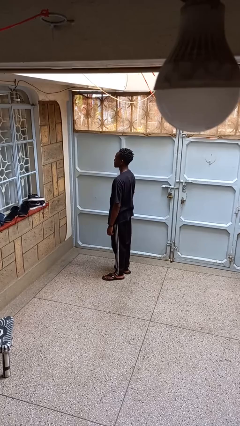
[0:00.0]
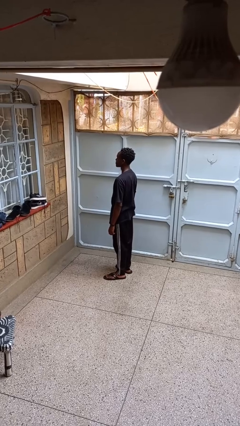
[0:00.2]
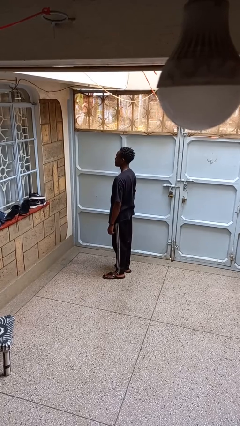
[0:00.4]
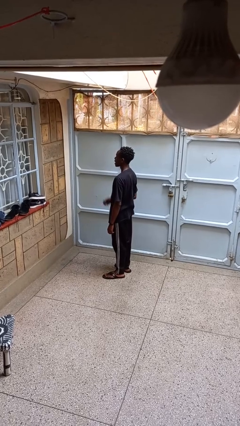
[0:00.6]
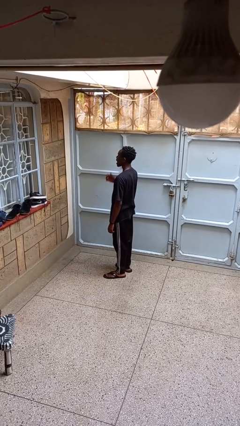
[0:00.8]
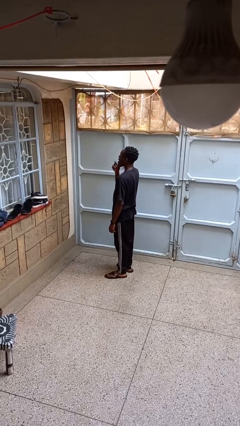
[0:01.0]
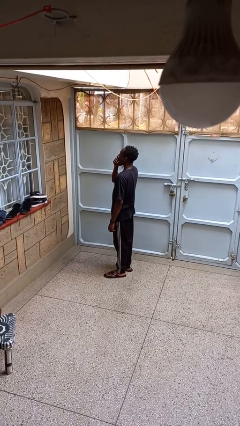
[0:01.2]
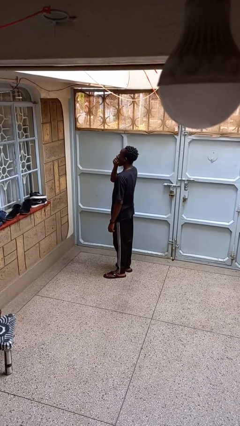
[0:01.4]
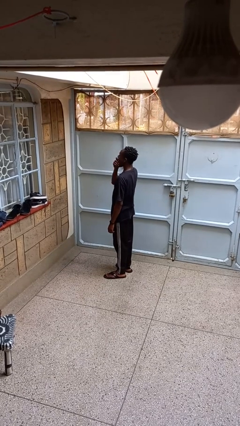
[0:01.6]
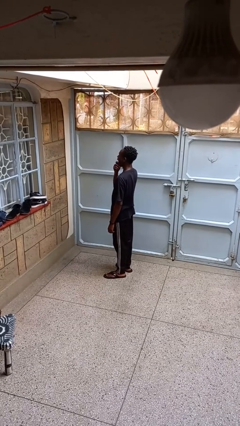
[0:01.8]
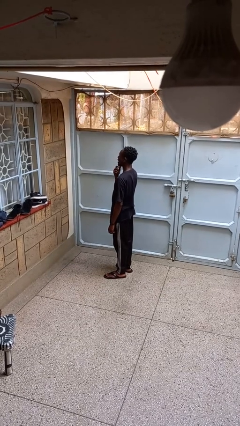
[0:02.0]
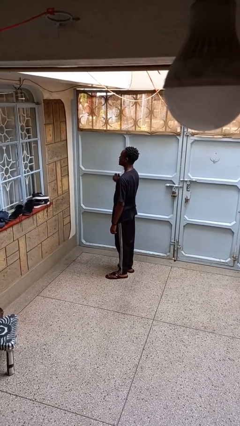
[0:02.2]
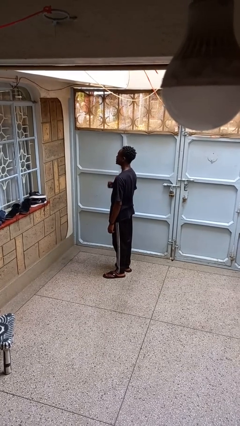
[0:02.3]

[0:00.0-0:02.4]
person yawns

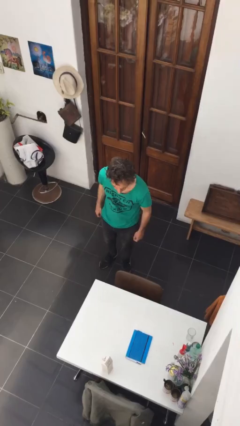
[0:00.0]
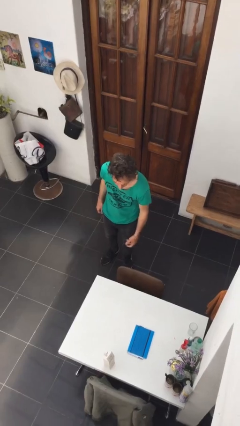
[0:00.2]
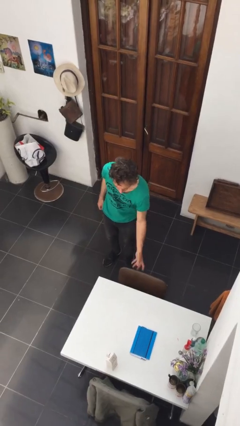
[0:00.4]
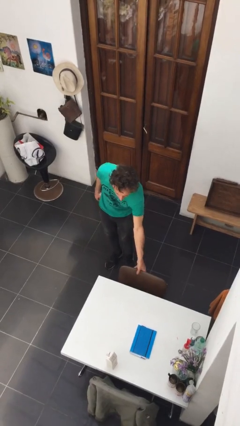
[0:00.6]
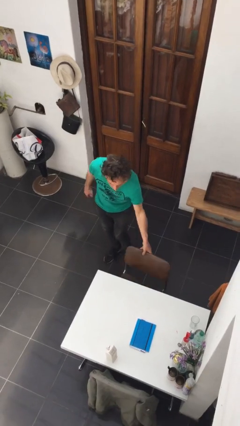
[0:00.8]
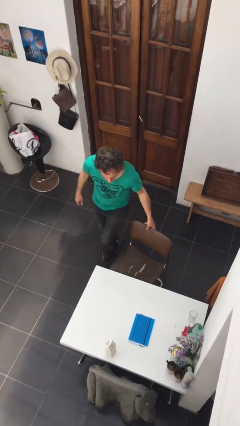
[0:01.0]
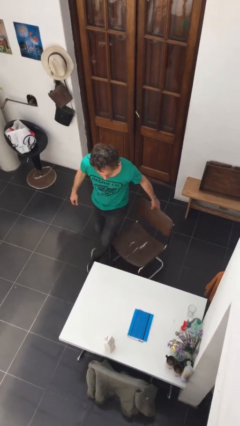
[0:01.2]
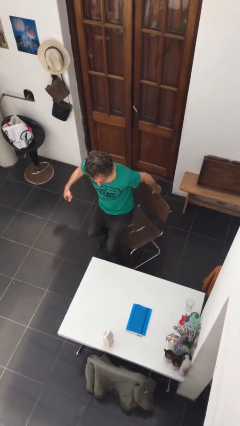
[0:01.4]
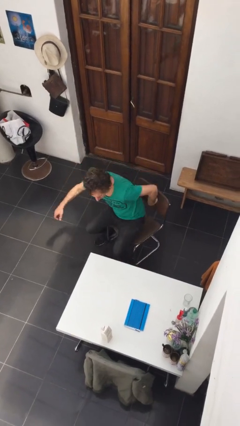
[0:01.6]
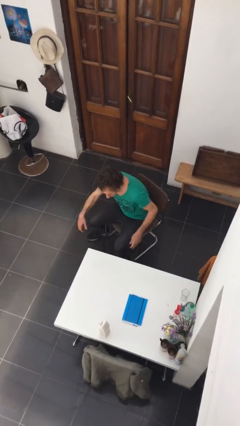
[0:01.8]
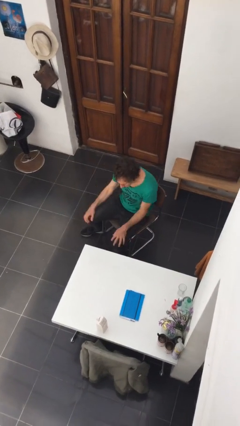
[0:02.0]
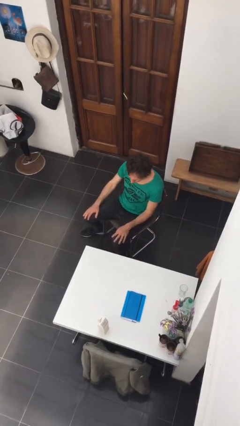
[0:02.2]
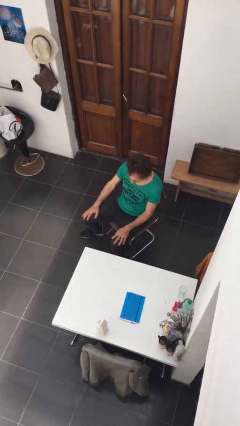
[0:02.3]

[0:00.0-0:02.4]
person sits down

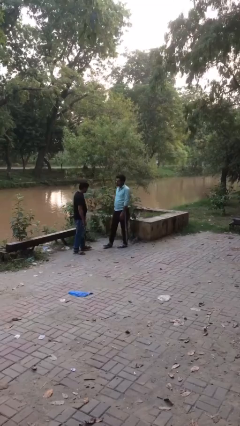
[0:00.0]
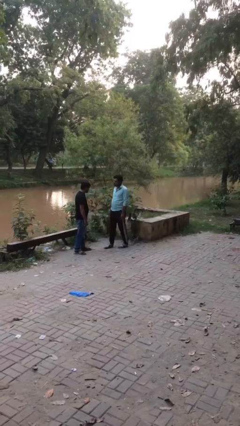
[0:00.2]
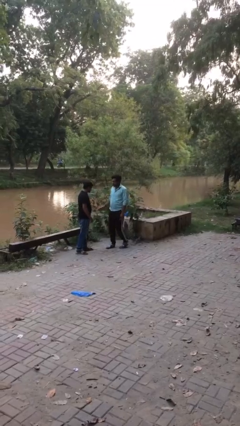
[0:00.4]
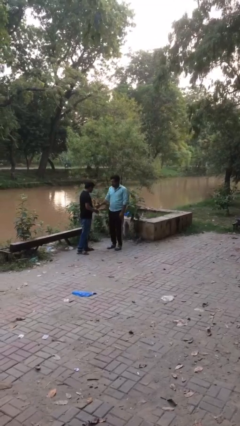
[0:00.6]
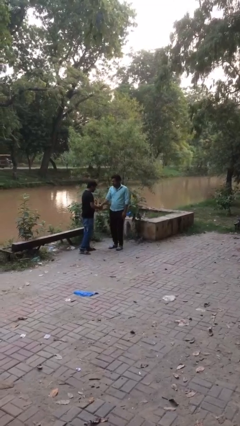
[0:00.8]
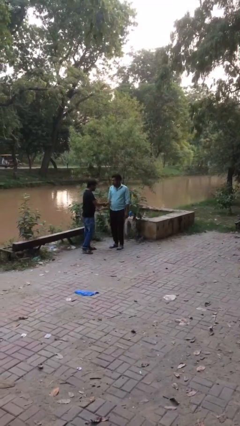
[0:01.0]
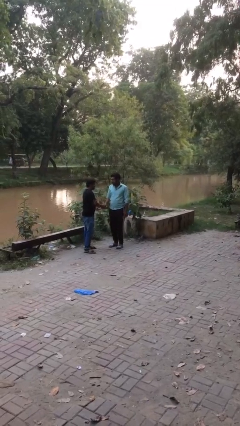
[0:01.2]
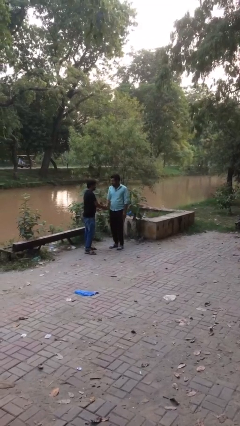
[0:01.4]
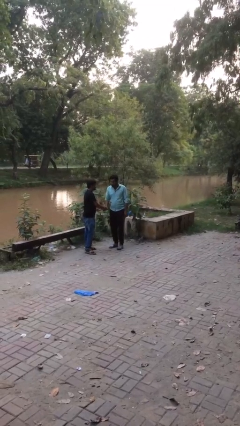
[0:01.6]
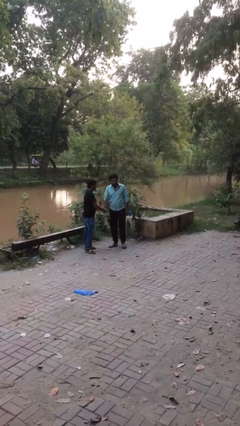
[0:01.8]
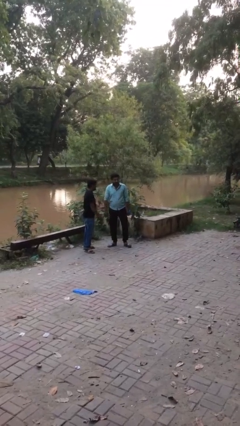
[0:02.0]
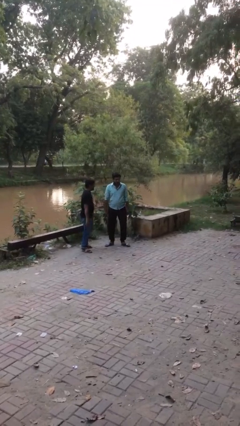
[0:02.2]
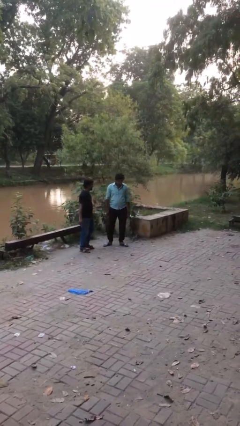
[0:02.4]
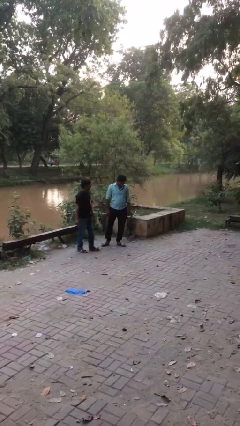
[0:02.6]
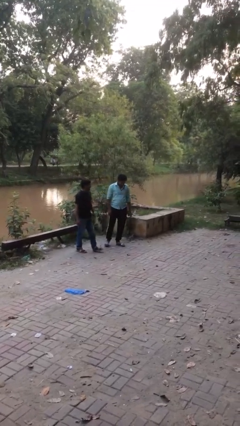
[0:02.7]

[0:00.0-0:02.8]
person shakes hand

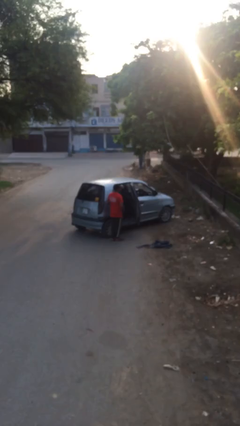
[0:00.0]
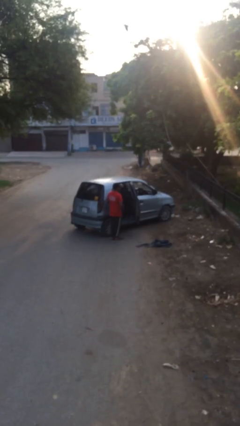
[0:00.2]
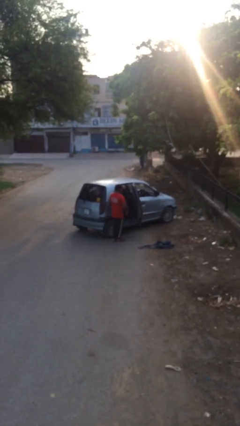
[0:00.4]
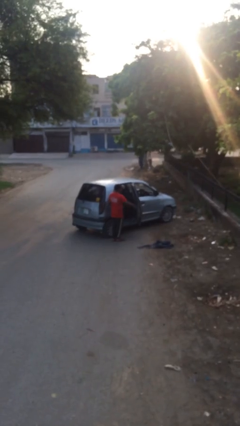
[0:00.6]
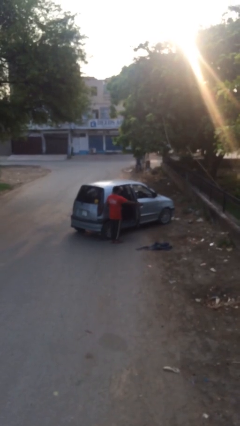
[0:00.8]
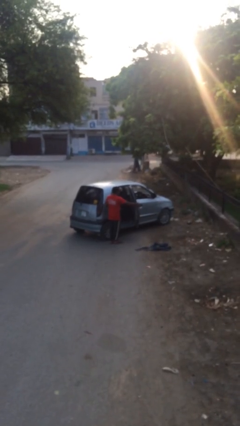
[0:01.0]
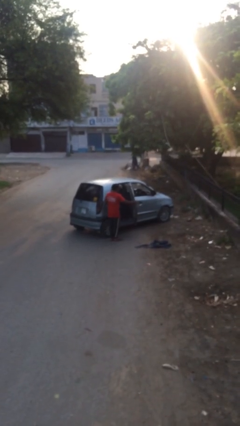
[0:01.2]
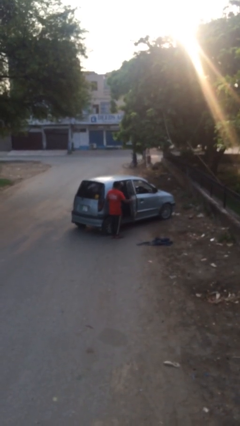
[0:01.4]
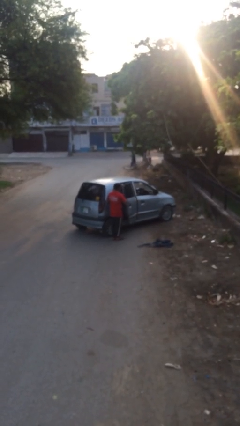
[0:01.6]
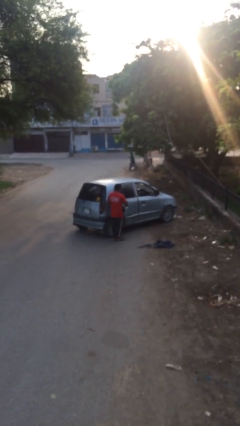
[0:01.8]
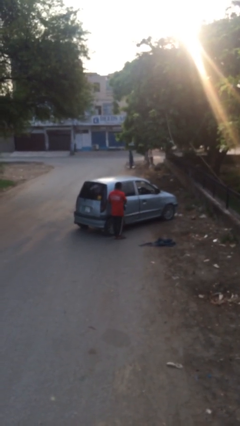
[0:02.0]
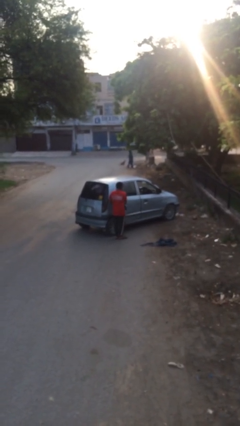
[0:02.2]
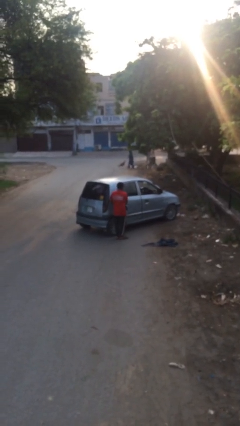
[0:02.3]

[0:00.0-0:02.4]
person closes car door

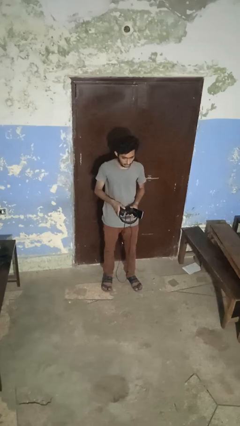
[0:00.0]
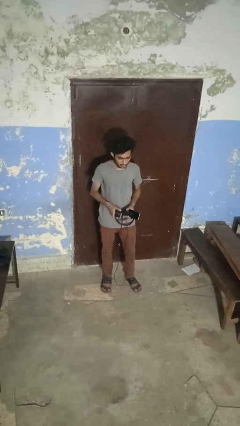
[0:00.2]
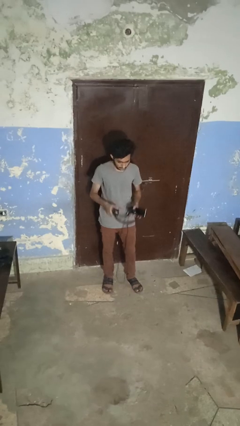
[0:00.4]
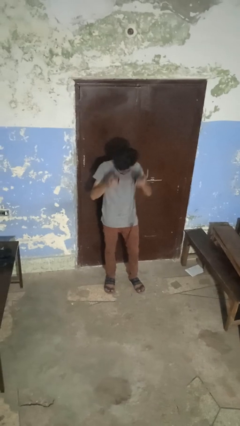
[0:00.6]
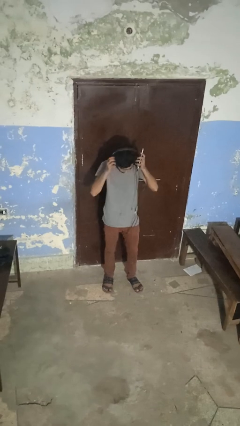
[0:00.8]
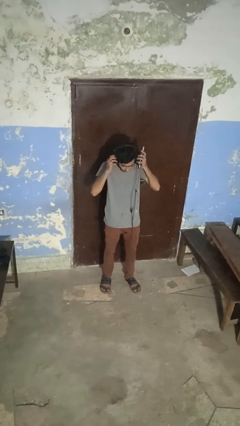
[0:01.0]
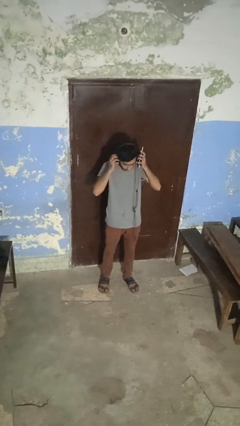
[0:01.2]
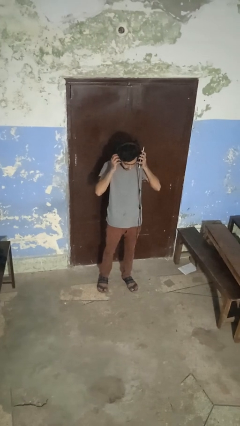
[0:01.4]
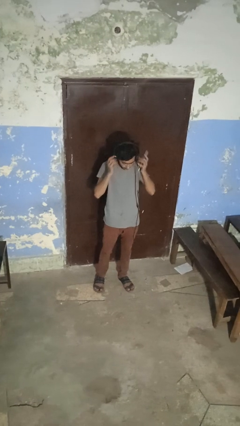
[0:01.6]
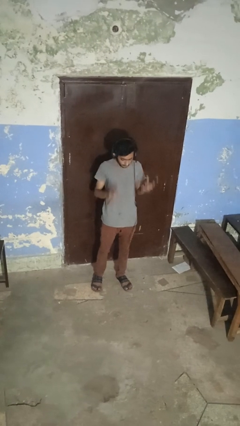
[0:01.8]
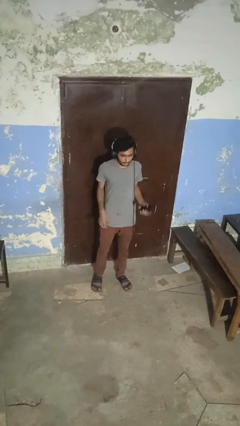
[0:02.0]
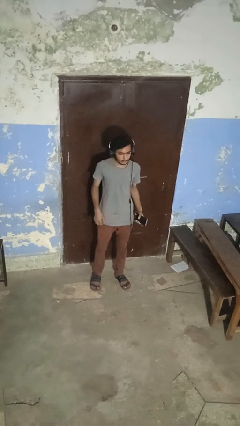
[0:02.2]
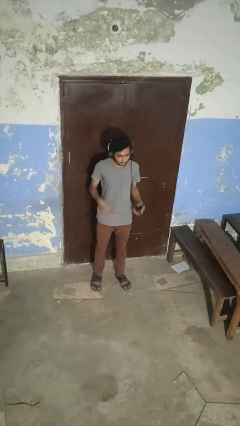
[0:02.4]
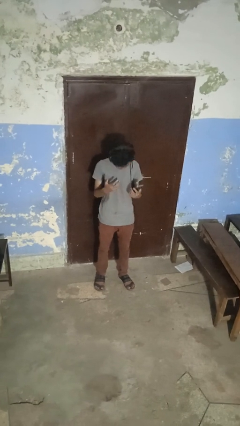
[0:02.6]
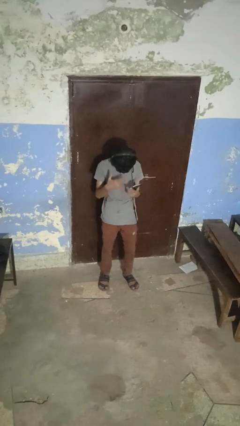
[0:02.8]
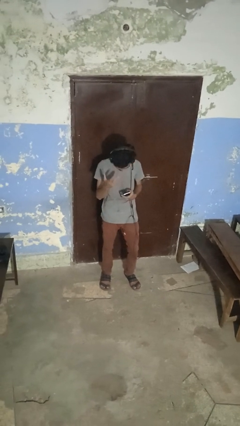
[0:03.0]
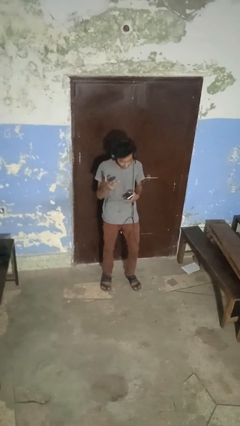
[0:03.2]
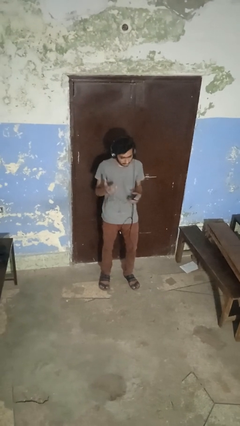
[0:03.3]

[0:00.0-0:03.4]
person puts on headphones

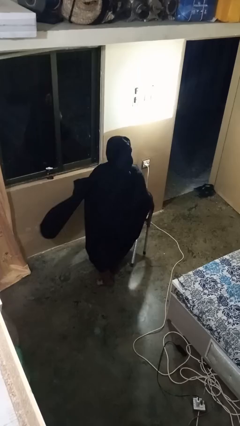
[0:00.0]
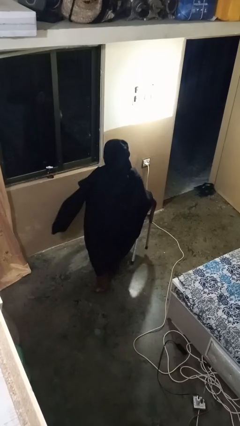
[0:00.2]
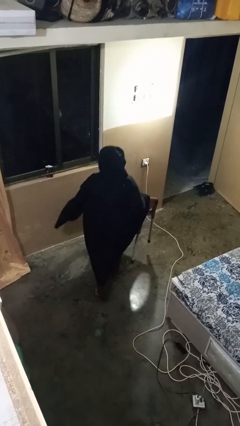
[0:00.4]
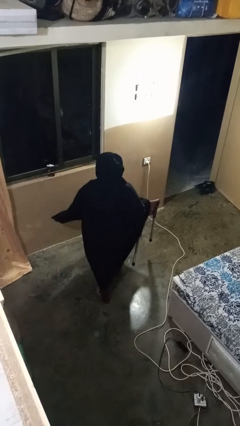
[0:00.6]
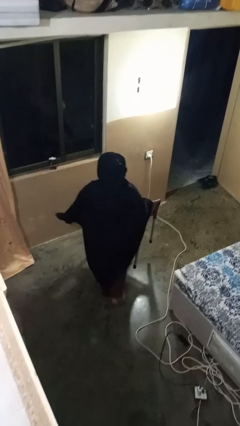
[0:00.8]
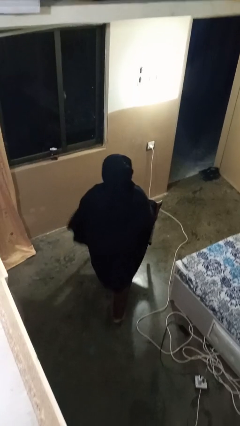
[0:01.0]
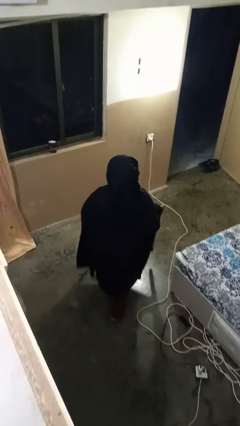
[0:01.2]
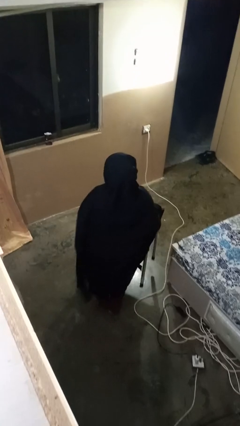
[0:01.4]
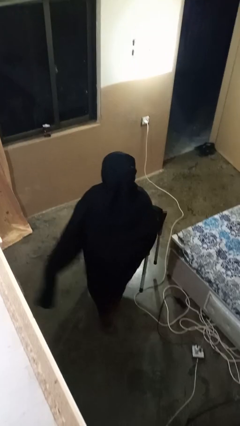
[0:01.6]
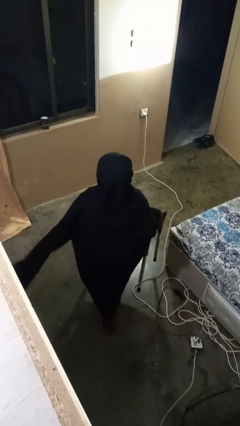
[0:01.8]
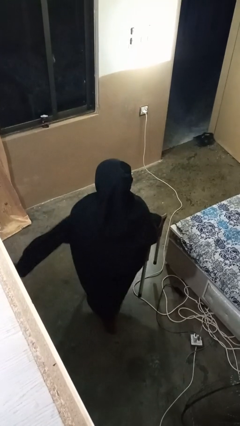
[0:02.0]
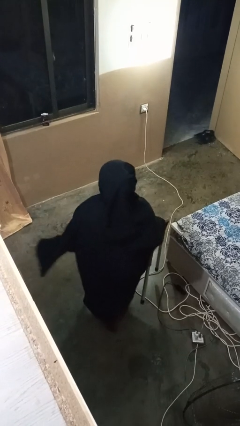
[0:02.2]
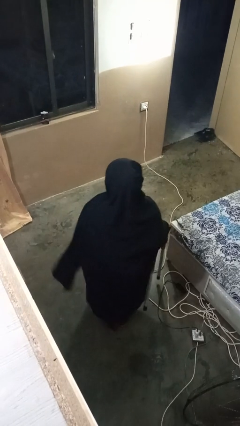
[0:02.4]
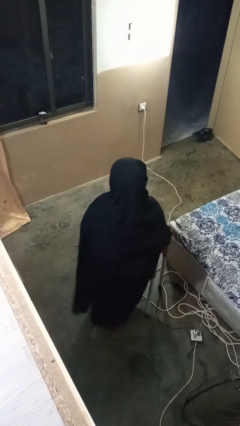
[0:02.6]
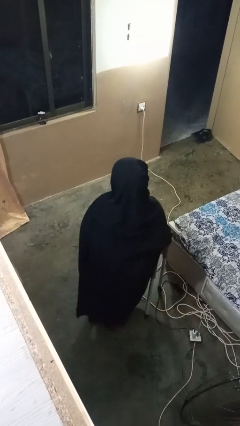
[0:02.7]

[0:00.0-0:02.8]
person carries furniture
